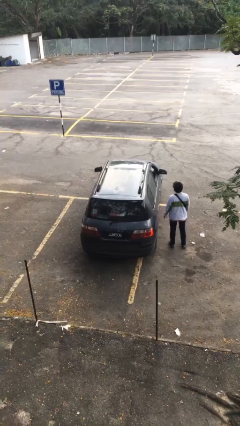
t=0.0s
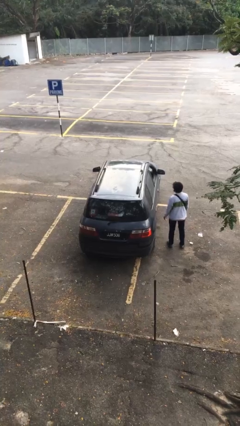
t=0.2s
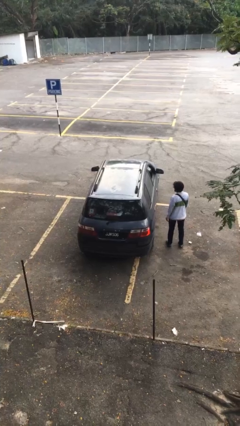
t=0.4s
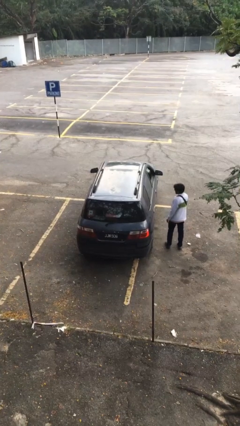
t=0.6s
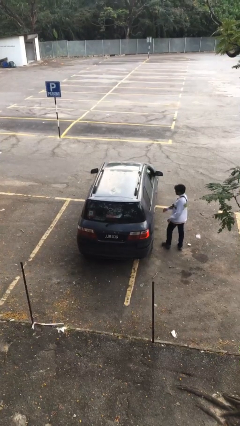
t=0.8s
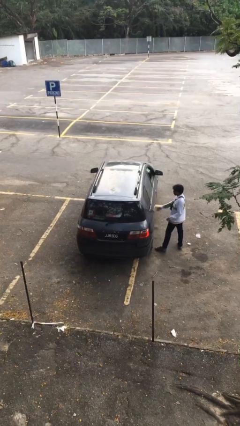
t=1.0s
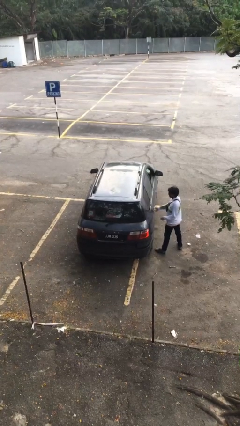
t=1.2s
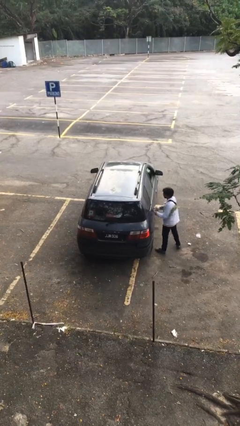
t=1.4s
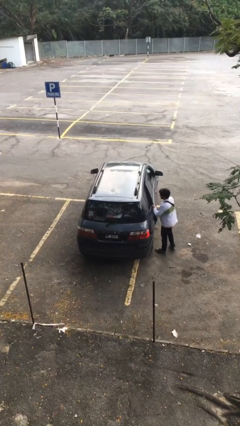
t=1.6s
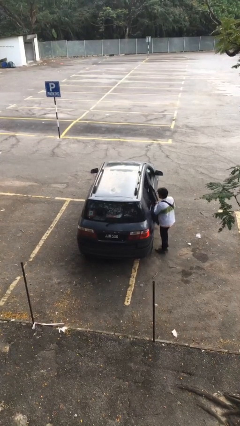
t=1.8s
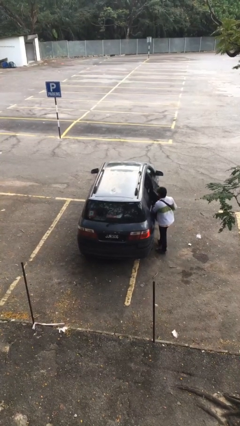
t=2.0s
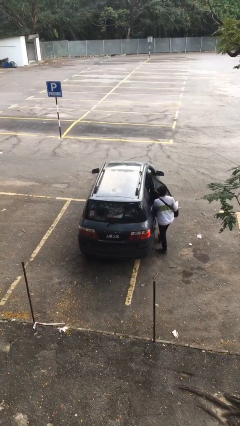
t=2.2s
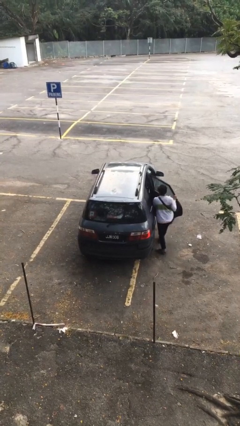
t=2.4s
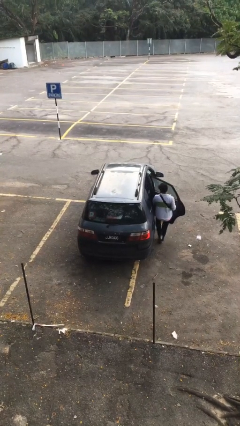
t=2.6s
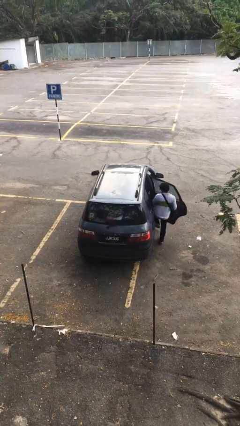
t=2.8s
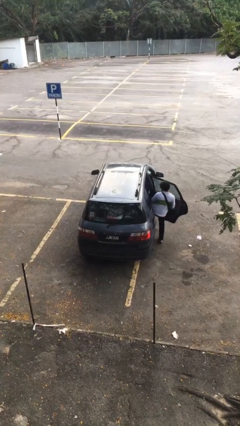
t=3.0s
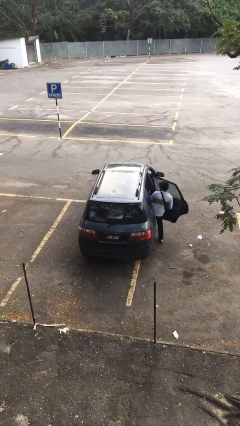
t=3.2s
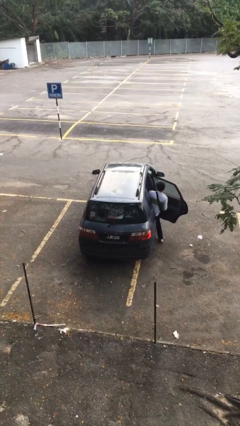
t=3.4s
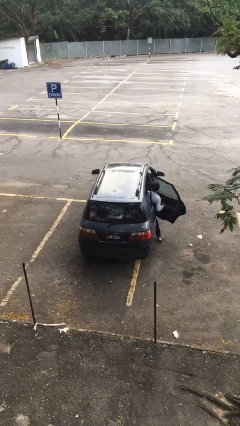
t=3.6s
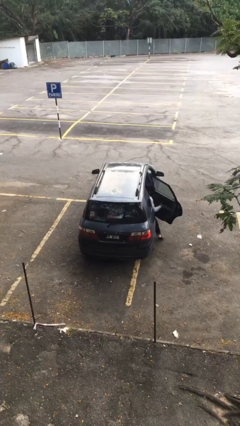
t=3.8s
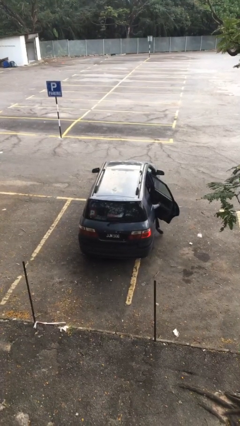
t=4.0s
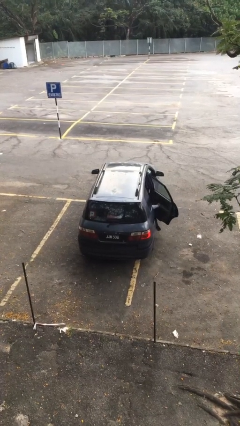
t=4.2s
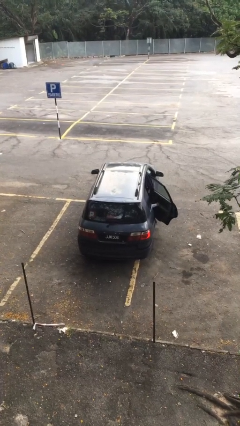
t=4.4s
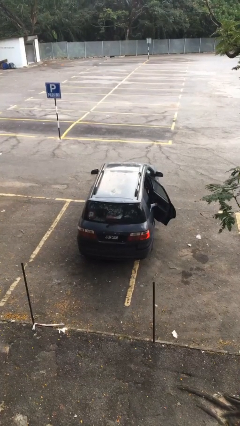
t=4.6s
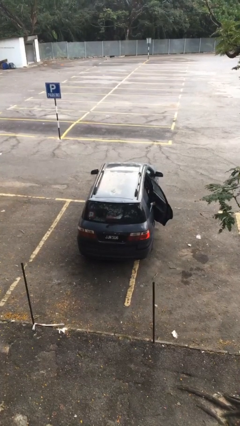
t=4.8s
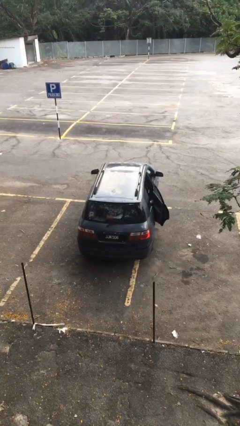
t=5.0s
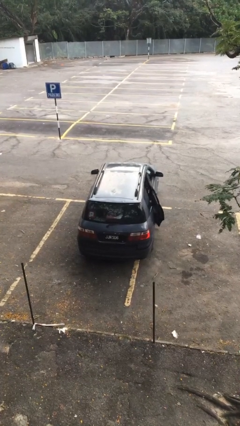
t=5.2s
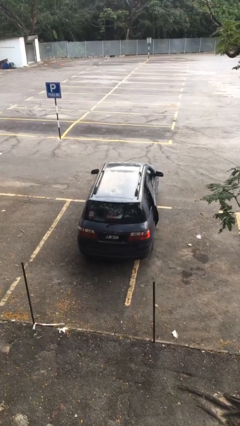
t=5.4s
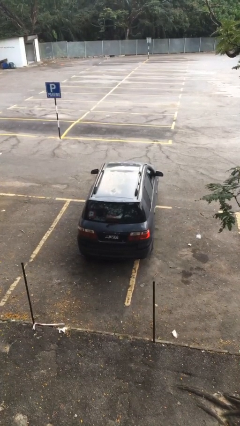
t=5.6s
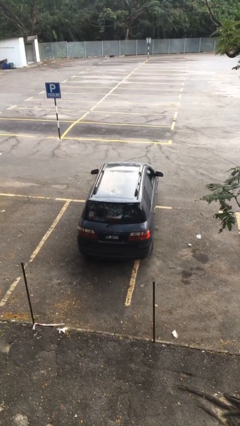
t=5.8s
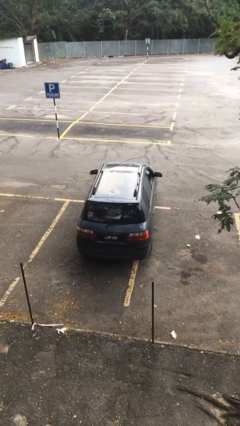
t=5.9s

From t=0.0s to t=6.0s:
car picks up person

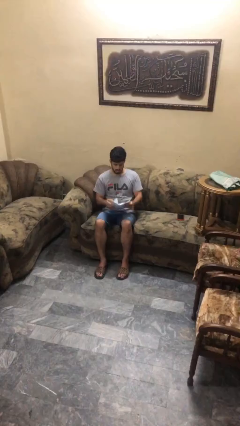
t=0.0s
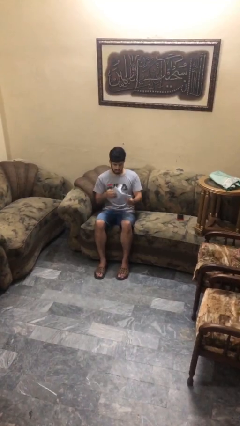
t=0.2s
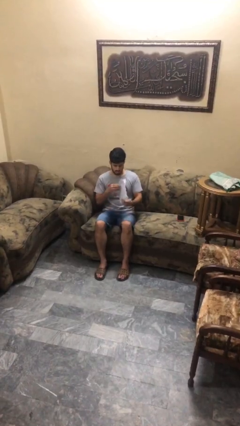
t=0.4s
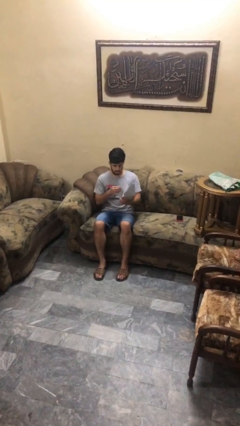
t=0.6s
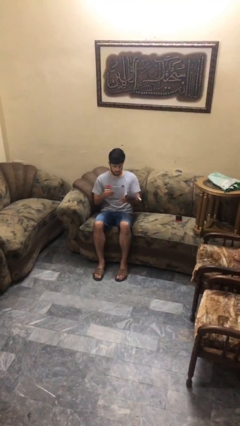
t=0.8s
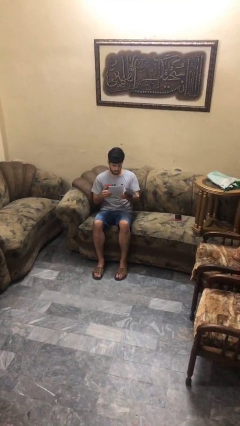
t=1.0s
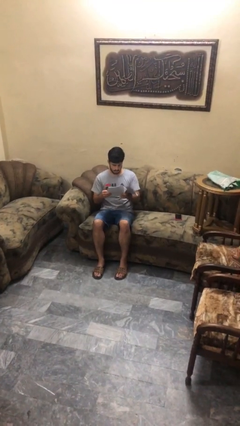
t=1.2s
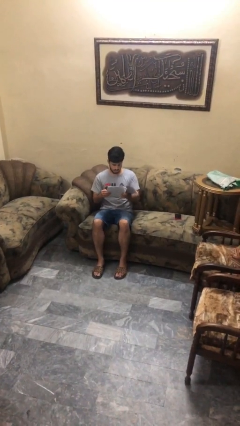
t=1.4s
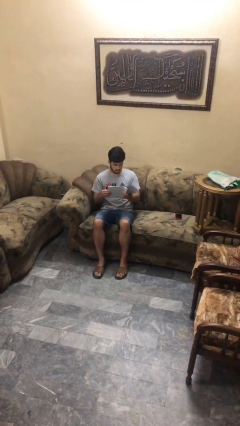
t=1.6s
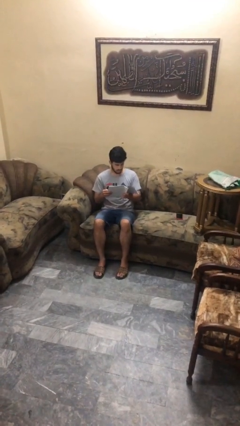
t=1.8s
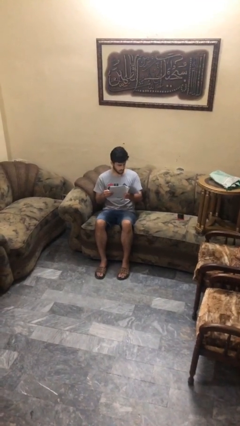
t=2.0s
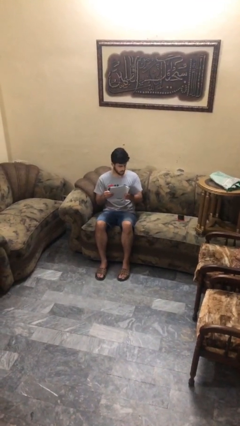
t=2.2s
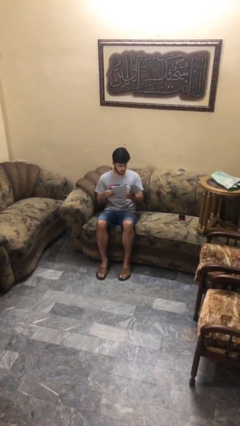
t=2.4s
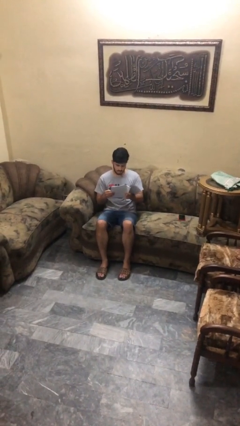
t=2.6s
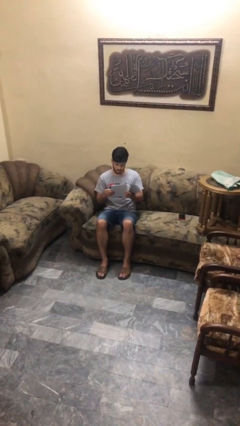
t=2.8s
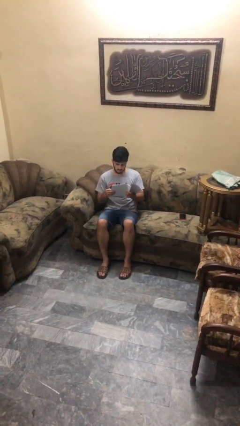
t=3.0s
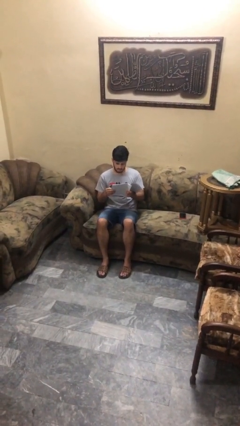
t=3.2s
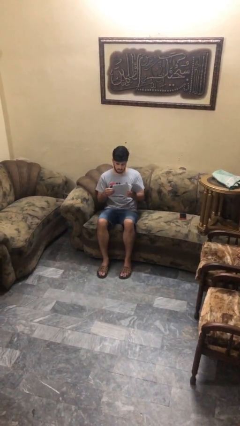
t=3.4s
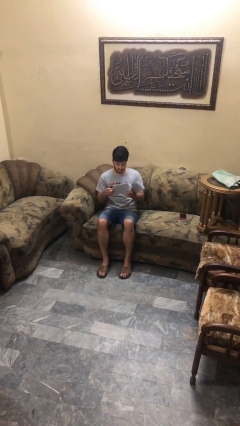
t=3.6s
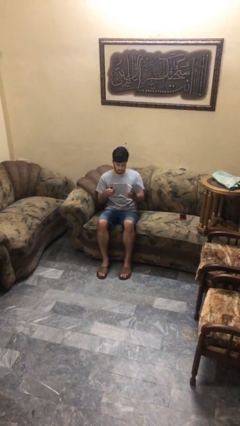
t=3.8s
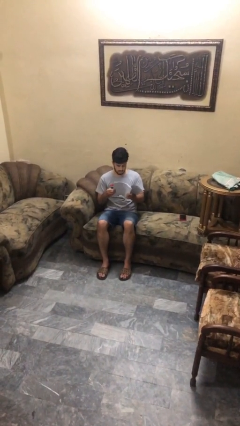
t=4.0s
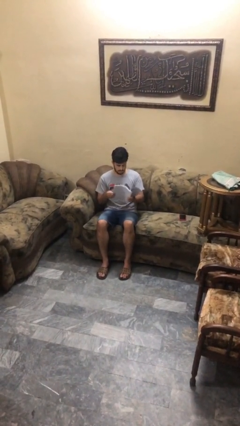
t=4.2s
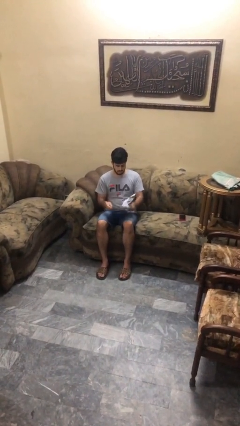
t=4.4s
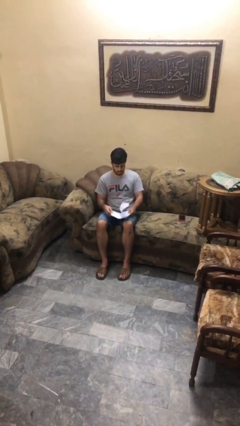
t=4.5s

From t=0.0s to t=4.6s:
person reads magazine

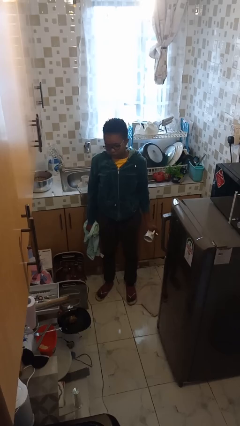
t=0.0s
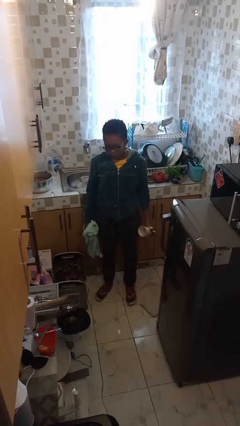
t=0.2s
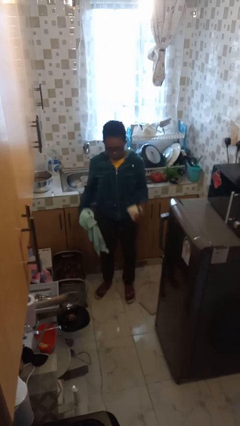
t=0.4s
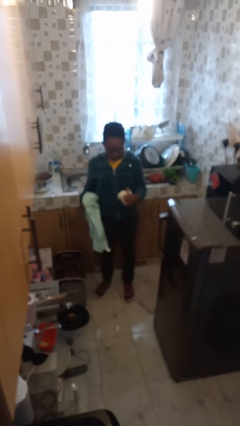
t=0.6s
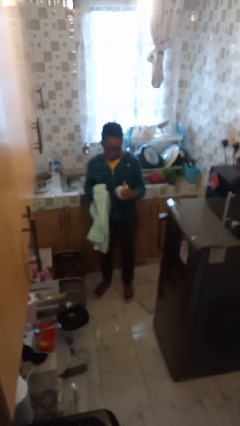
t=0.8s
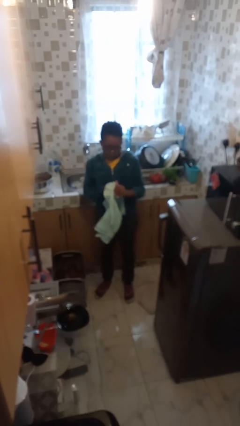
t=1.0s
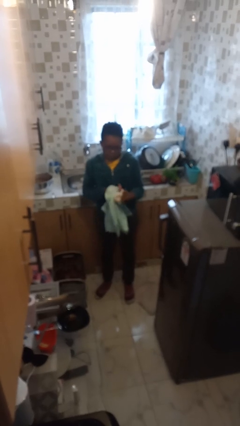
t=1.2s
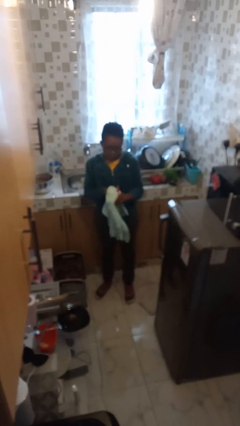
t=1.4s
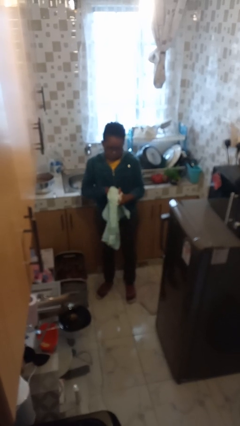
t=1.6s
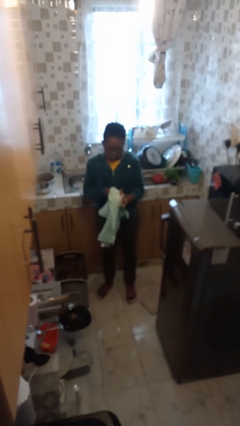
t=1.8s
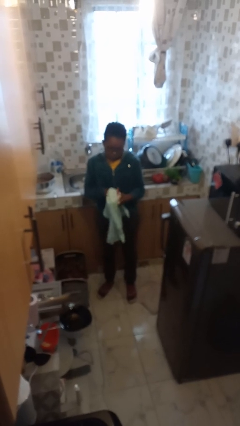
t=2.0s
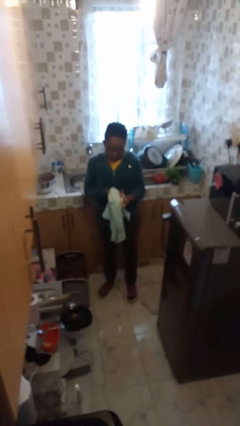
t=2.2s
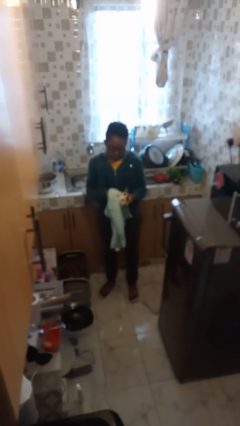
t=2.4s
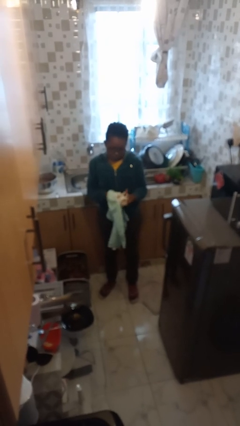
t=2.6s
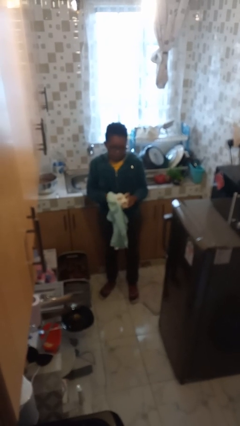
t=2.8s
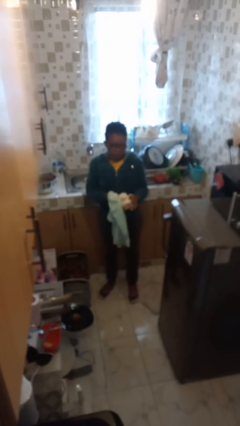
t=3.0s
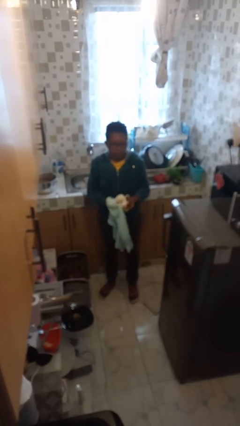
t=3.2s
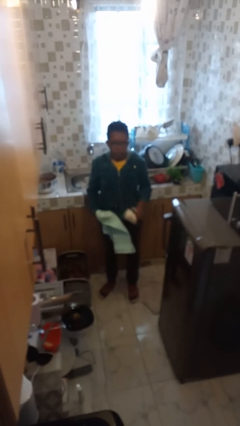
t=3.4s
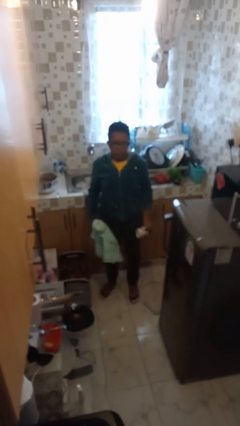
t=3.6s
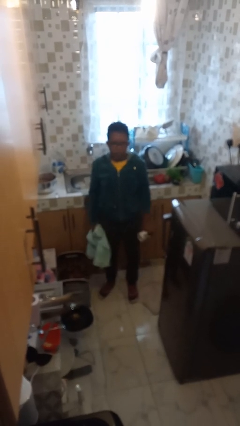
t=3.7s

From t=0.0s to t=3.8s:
person dries dish

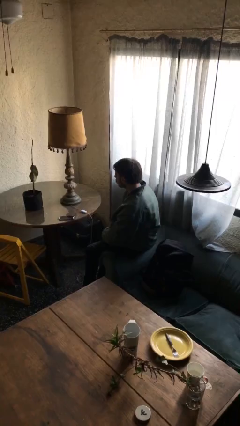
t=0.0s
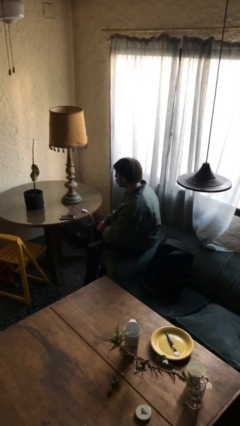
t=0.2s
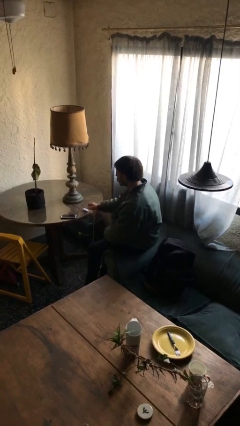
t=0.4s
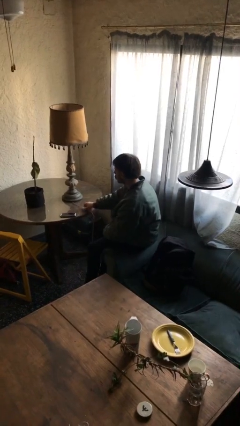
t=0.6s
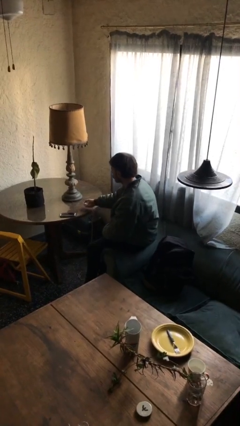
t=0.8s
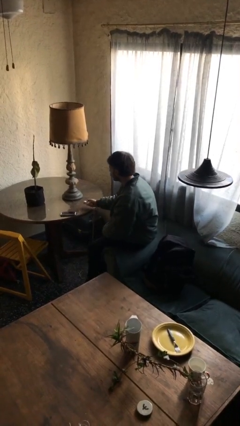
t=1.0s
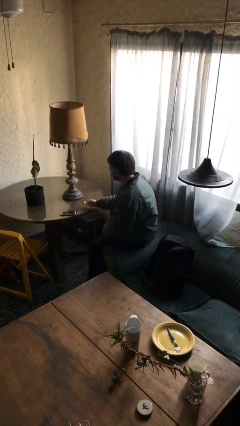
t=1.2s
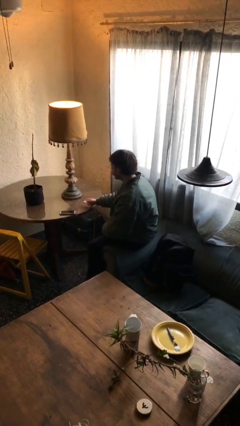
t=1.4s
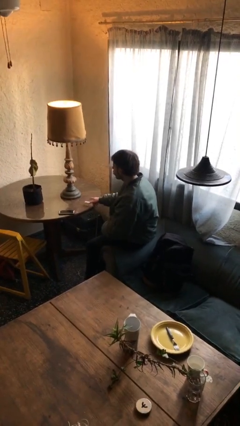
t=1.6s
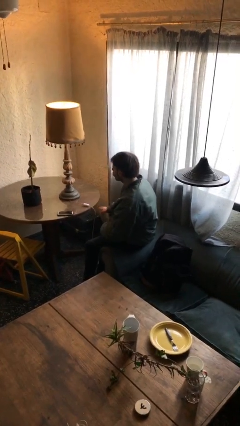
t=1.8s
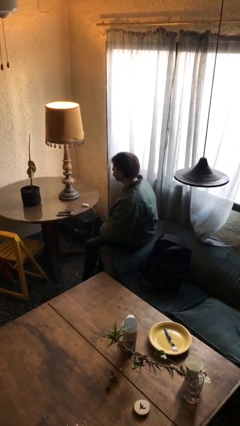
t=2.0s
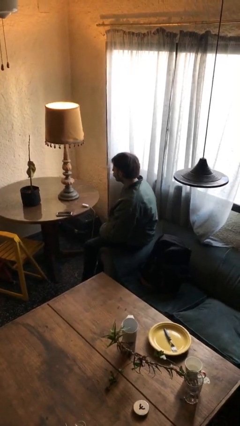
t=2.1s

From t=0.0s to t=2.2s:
person turns on lamp

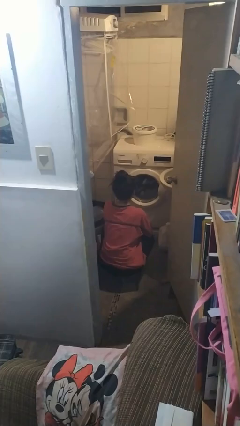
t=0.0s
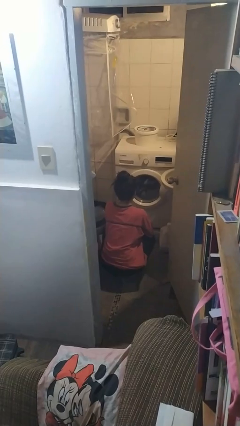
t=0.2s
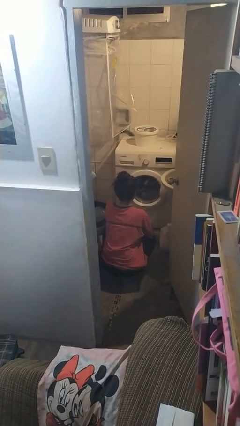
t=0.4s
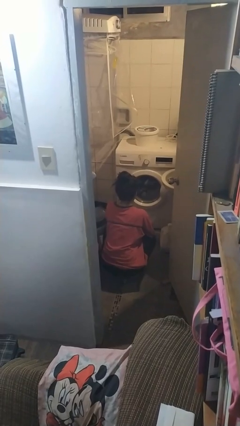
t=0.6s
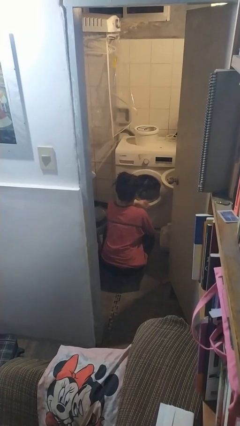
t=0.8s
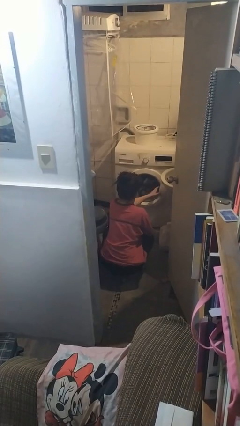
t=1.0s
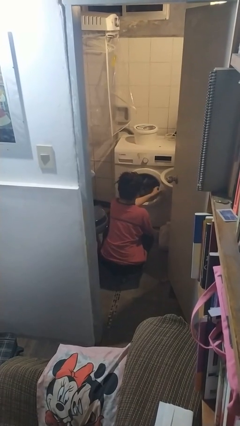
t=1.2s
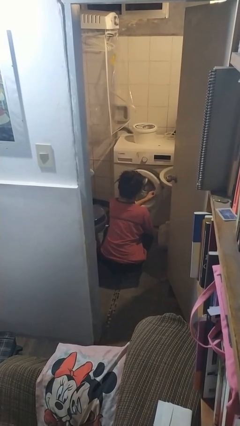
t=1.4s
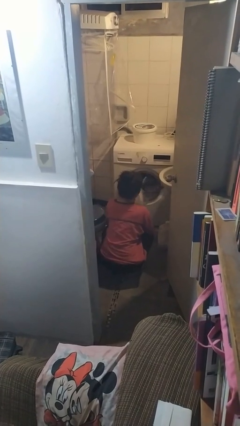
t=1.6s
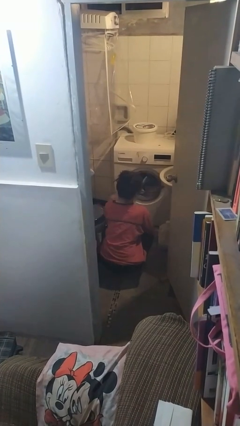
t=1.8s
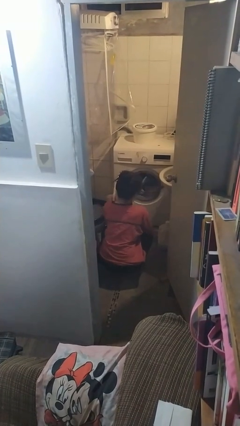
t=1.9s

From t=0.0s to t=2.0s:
person opens clothes washer
